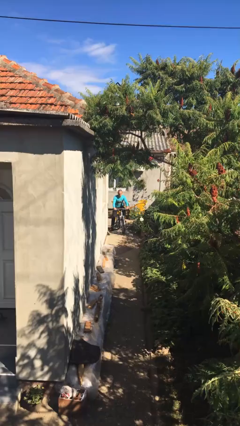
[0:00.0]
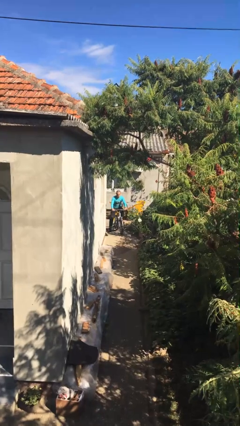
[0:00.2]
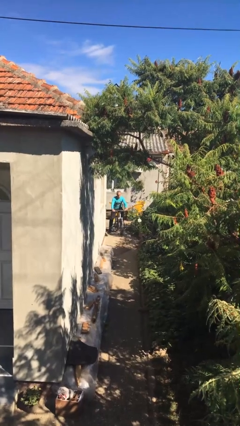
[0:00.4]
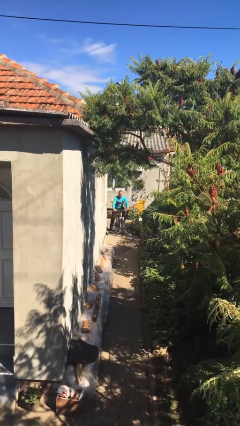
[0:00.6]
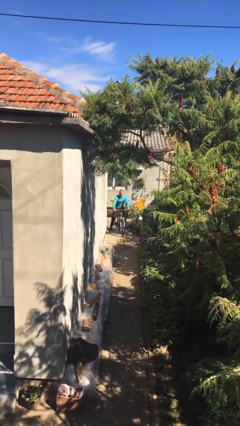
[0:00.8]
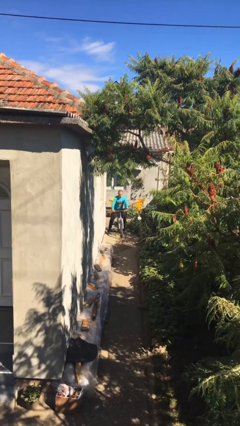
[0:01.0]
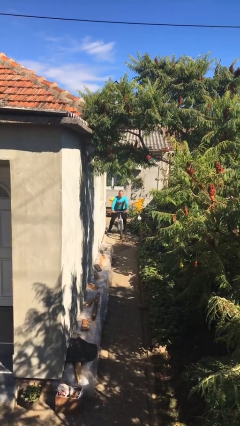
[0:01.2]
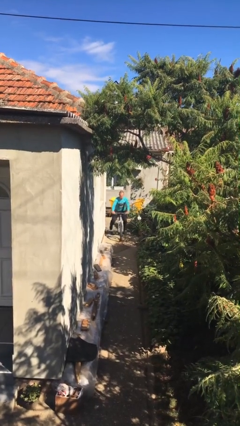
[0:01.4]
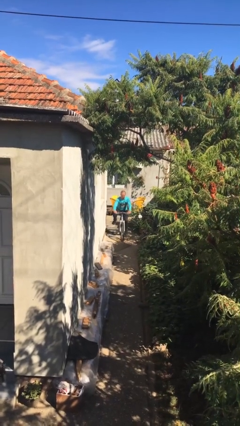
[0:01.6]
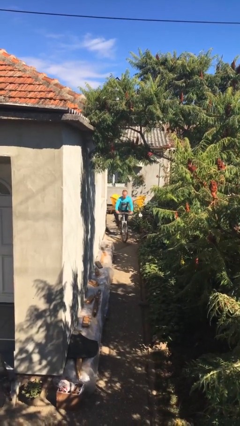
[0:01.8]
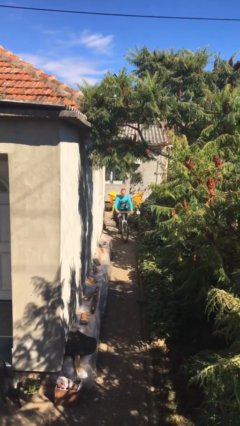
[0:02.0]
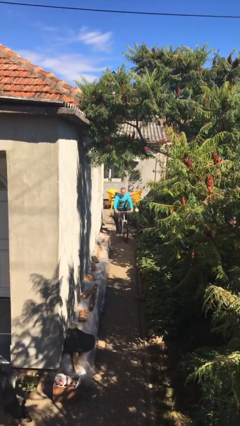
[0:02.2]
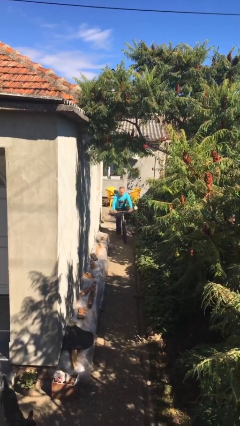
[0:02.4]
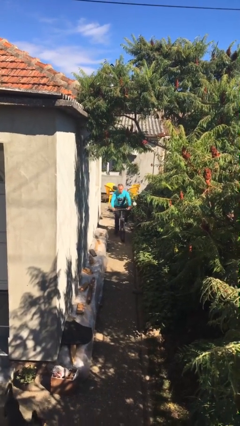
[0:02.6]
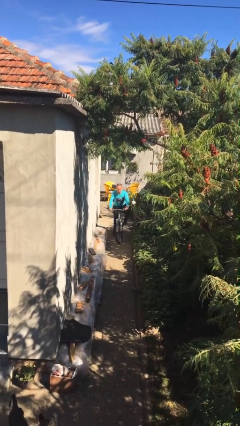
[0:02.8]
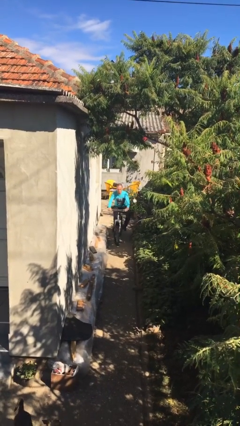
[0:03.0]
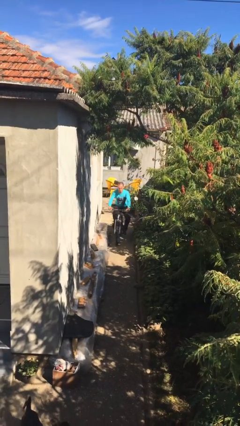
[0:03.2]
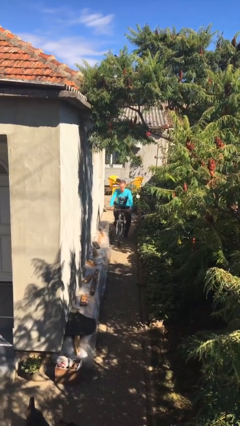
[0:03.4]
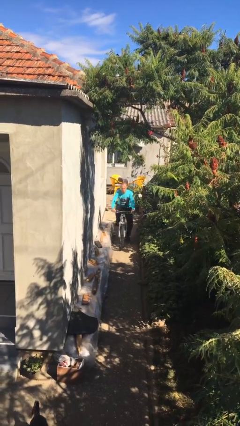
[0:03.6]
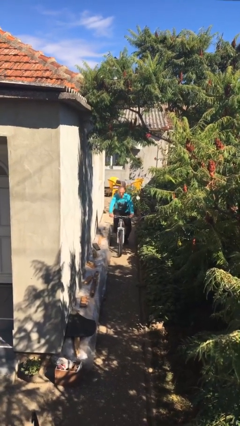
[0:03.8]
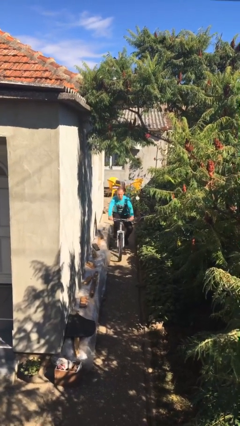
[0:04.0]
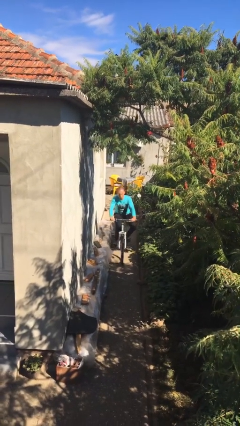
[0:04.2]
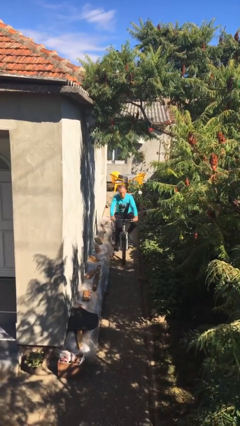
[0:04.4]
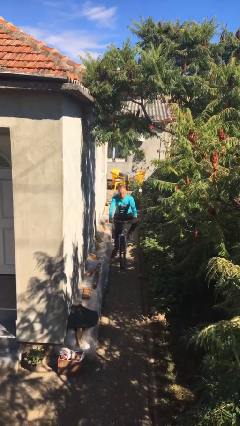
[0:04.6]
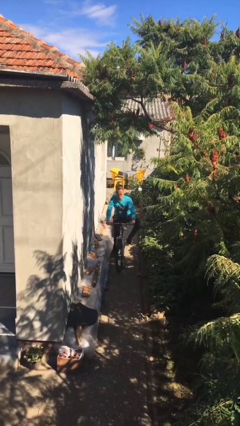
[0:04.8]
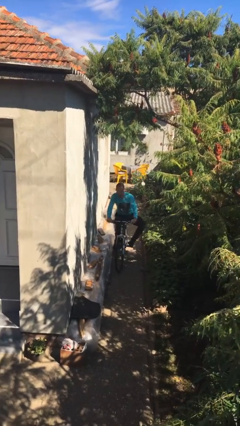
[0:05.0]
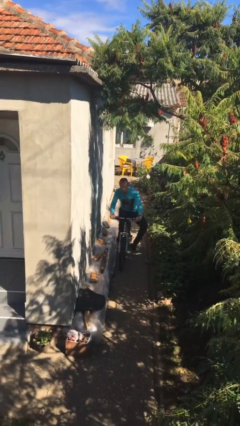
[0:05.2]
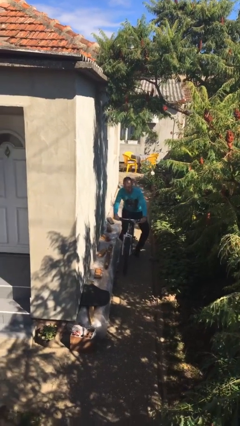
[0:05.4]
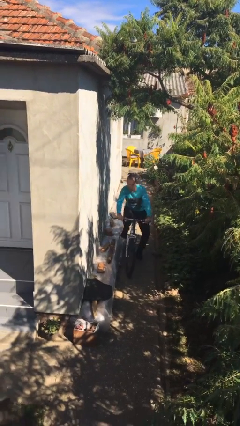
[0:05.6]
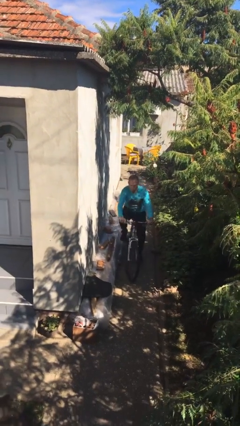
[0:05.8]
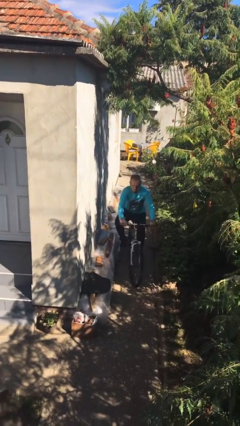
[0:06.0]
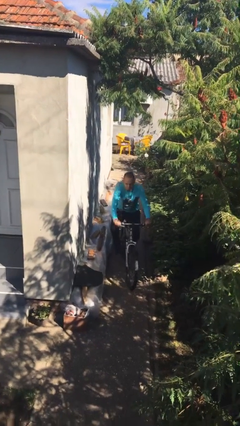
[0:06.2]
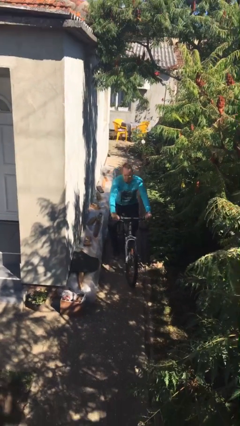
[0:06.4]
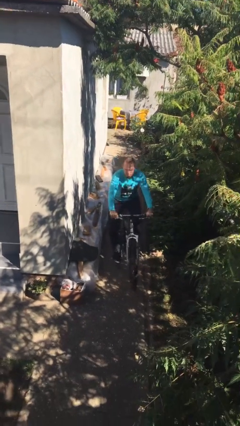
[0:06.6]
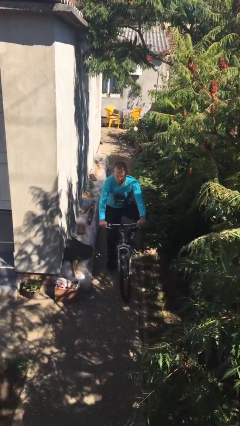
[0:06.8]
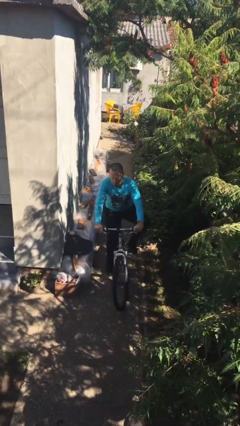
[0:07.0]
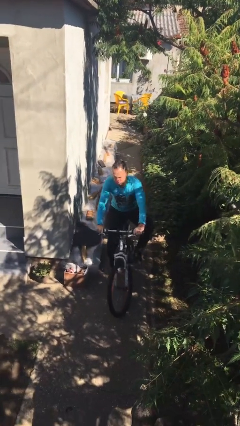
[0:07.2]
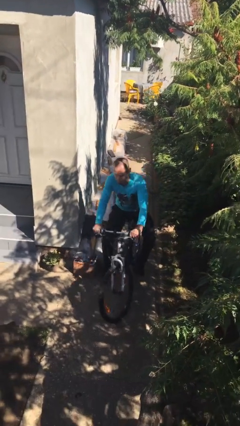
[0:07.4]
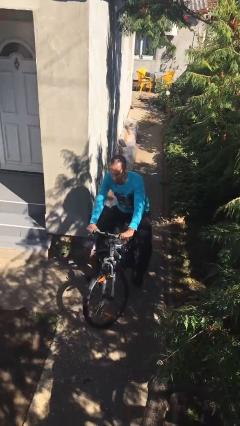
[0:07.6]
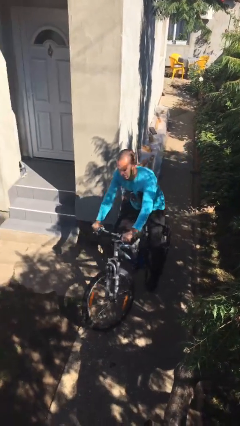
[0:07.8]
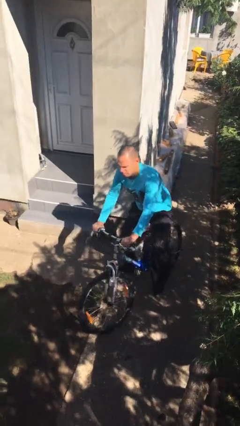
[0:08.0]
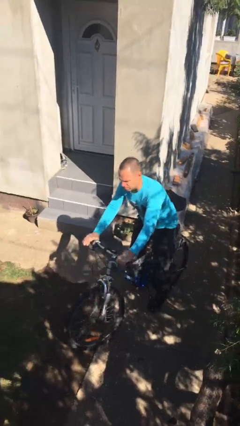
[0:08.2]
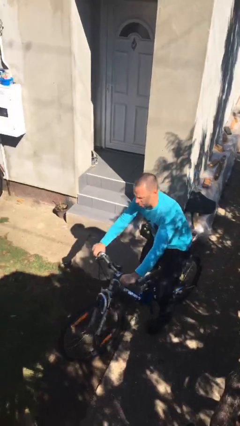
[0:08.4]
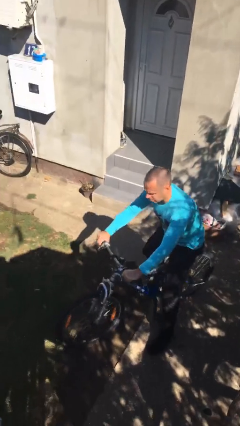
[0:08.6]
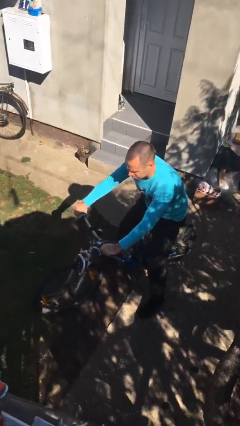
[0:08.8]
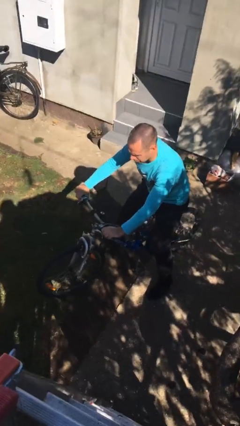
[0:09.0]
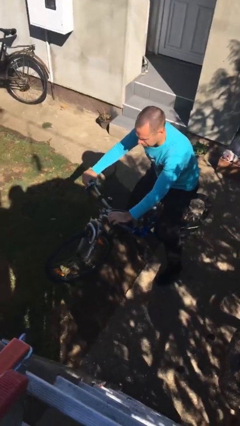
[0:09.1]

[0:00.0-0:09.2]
person rides bicycle

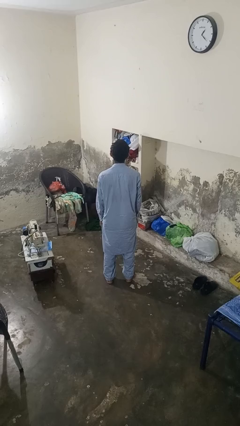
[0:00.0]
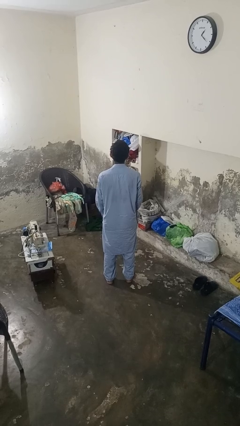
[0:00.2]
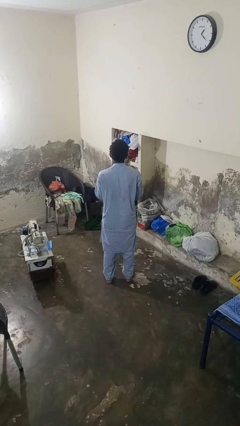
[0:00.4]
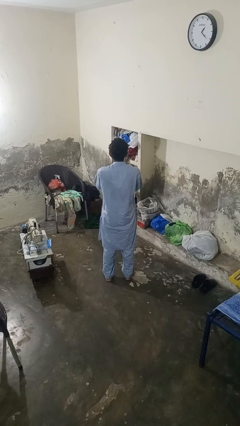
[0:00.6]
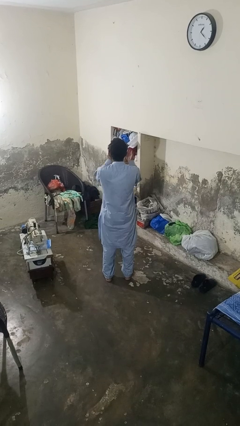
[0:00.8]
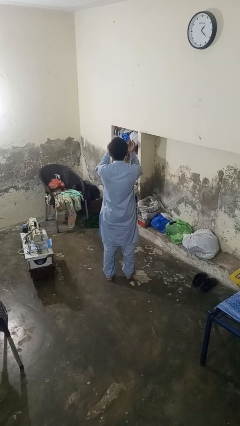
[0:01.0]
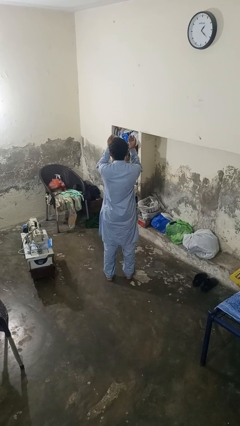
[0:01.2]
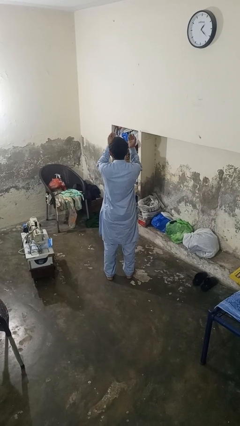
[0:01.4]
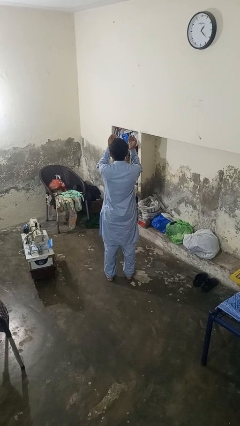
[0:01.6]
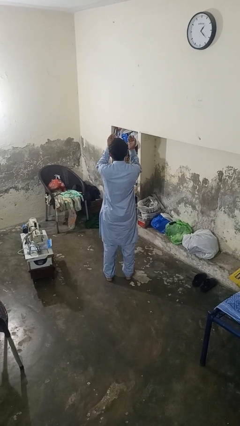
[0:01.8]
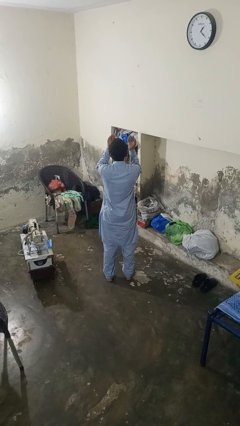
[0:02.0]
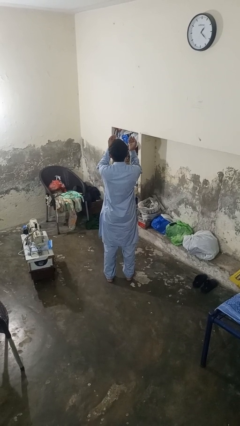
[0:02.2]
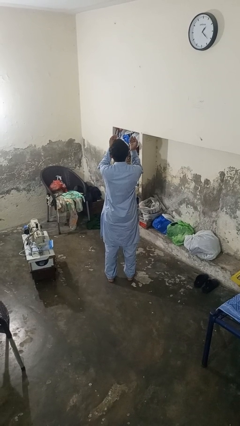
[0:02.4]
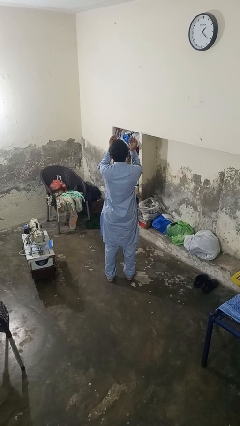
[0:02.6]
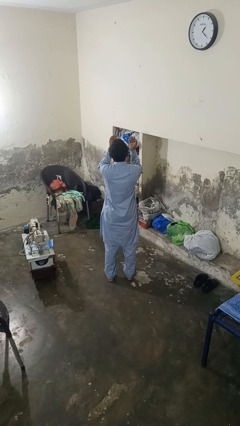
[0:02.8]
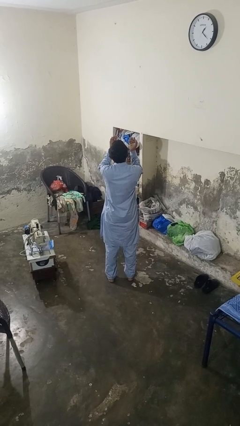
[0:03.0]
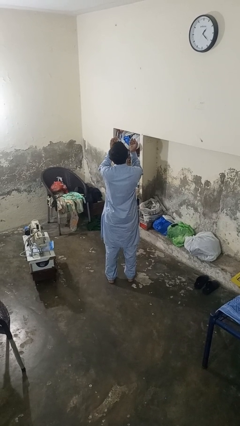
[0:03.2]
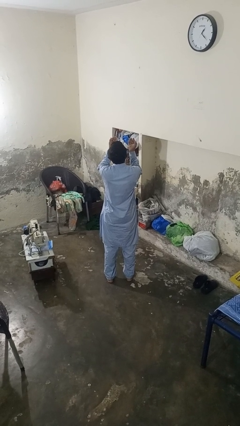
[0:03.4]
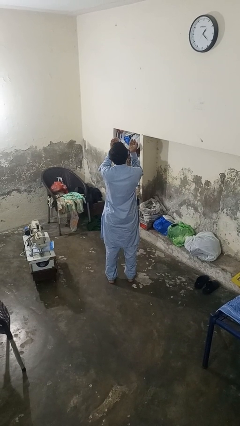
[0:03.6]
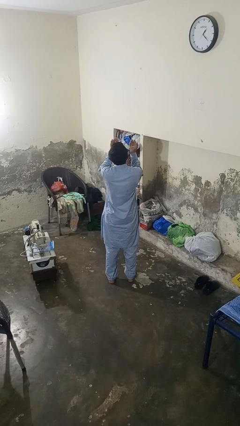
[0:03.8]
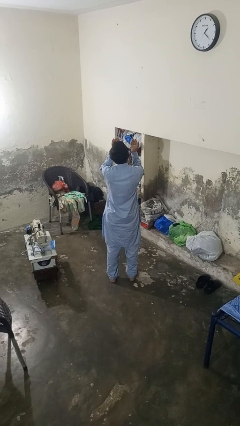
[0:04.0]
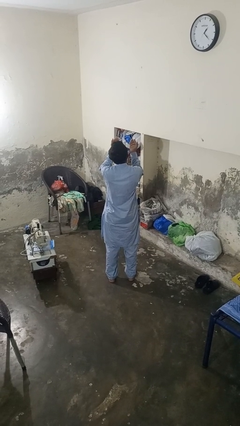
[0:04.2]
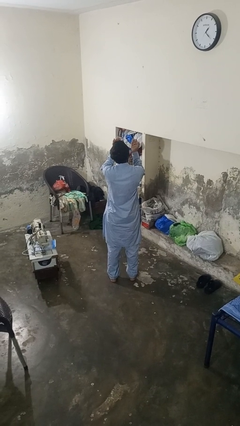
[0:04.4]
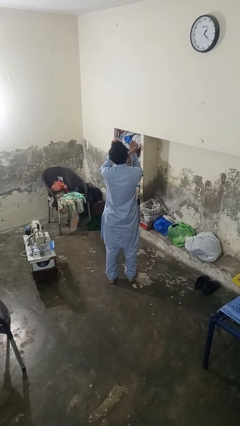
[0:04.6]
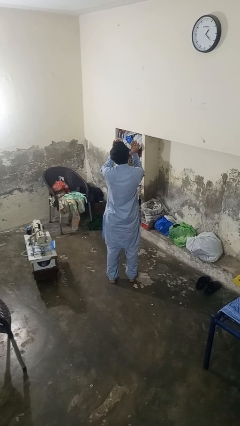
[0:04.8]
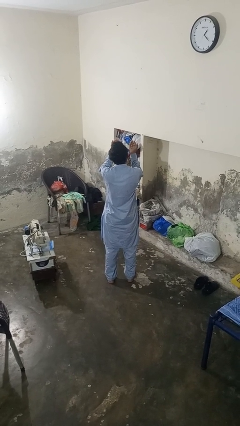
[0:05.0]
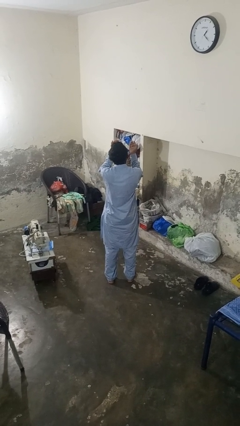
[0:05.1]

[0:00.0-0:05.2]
person prays

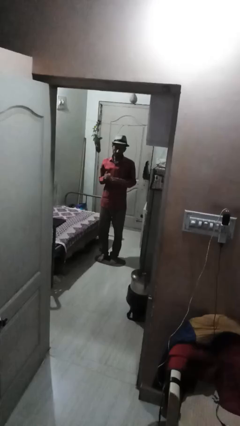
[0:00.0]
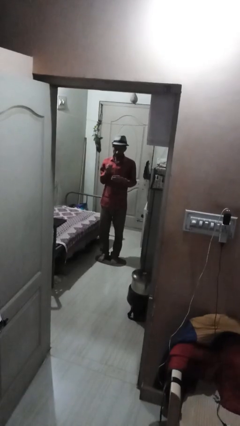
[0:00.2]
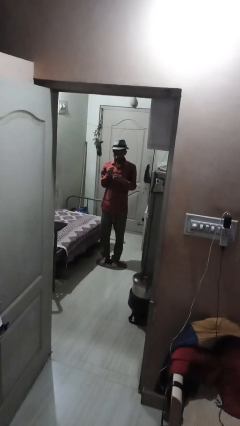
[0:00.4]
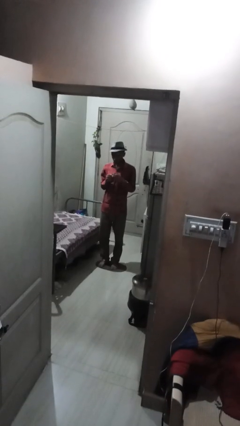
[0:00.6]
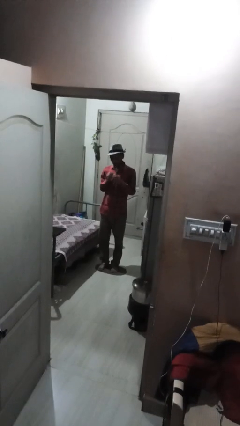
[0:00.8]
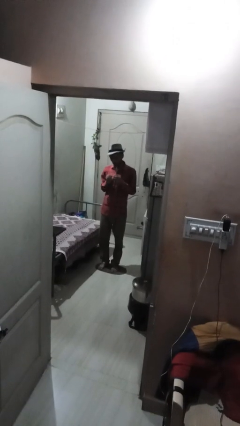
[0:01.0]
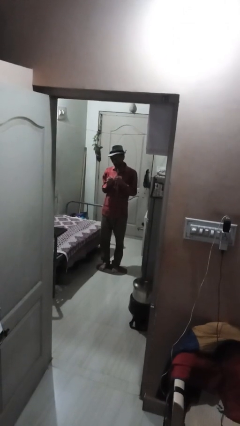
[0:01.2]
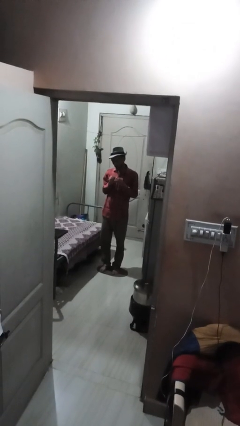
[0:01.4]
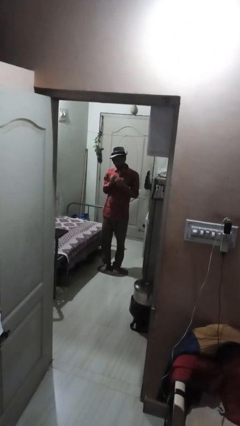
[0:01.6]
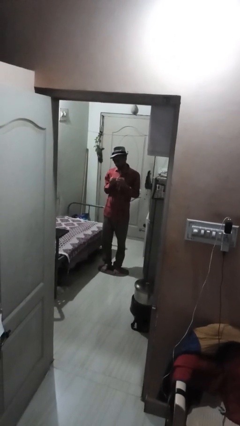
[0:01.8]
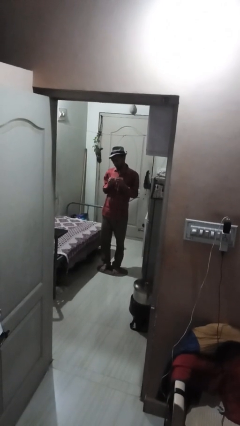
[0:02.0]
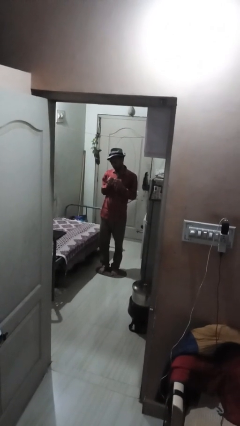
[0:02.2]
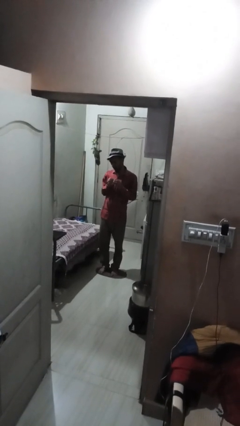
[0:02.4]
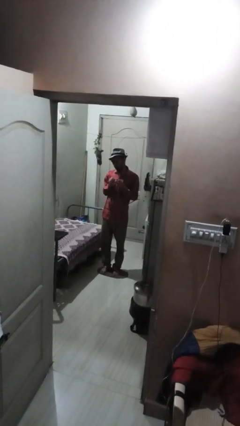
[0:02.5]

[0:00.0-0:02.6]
person files fingernails

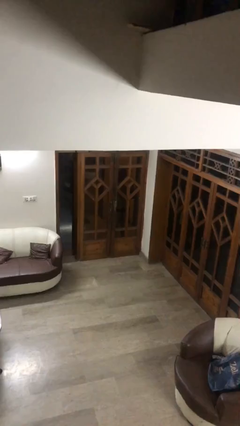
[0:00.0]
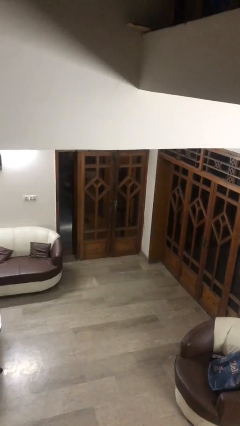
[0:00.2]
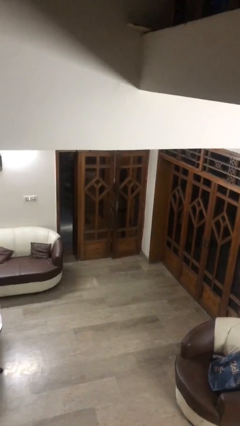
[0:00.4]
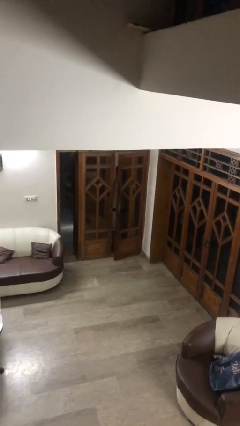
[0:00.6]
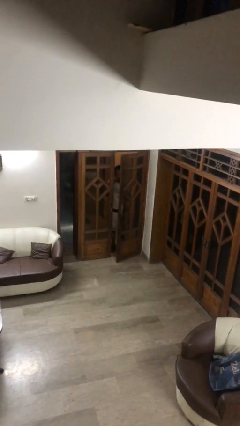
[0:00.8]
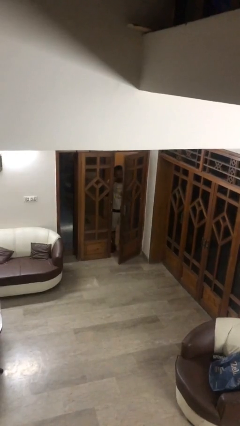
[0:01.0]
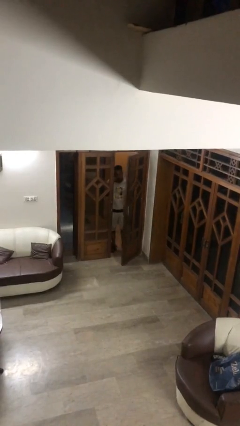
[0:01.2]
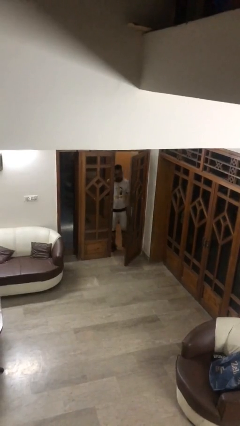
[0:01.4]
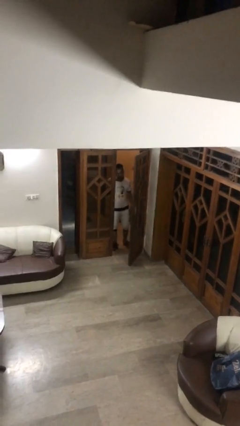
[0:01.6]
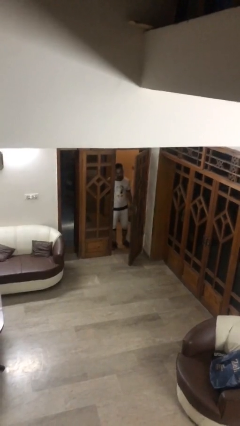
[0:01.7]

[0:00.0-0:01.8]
person opens facility door
